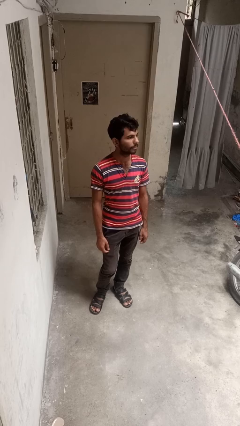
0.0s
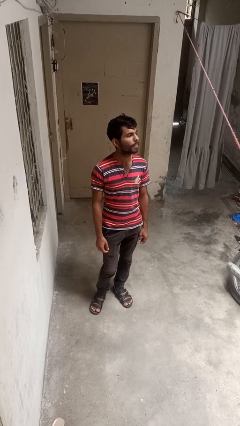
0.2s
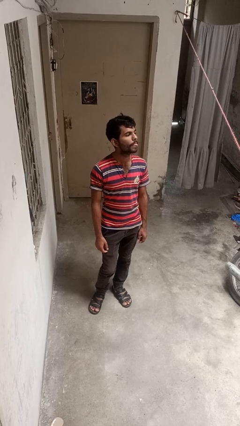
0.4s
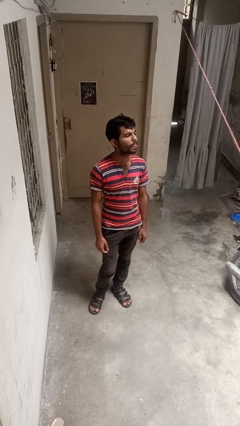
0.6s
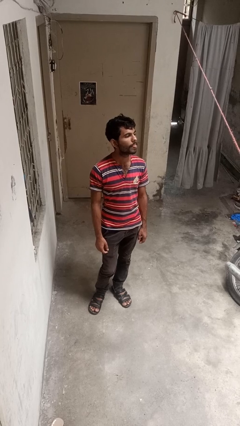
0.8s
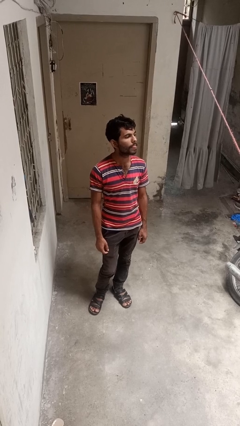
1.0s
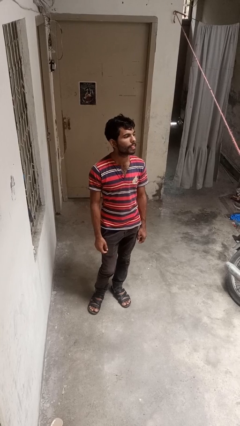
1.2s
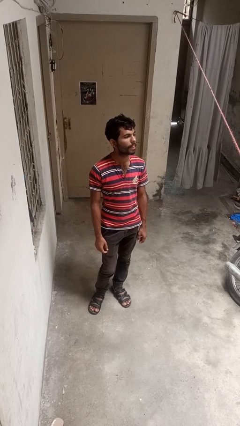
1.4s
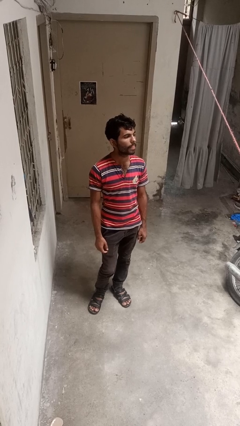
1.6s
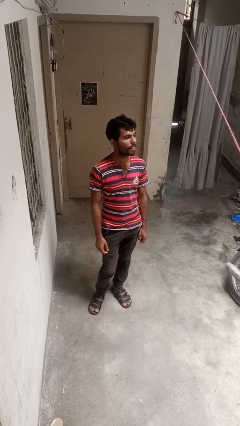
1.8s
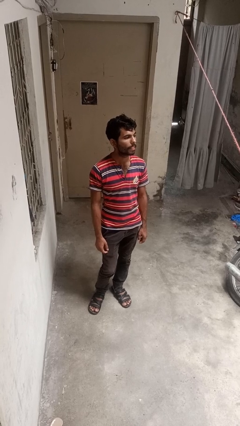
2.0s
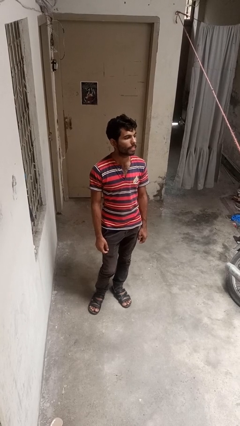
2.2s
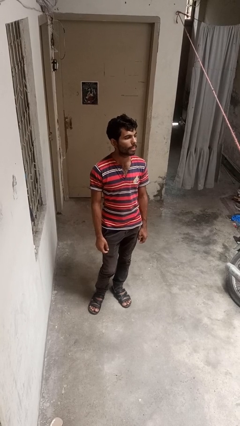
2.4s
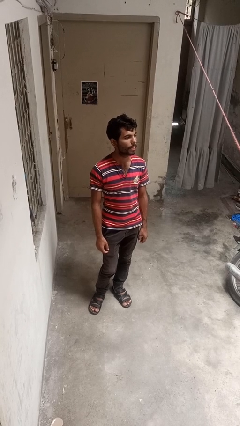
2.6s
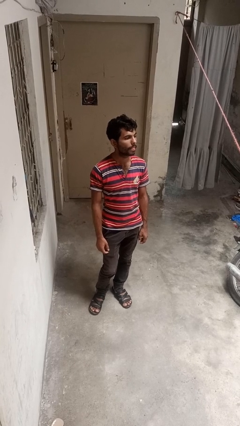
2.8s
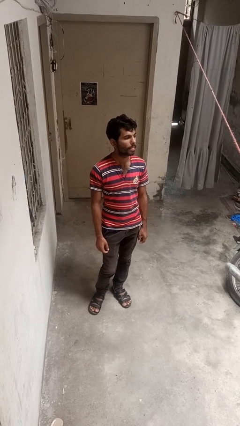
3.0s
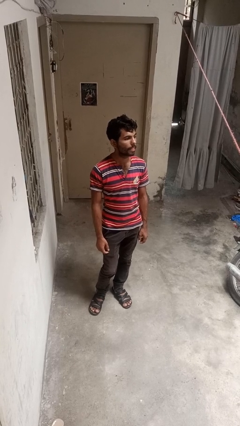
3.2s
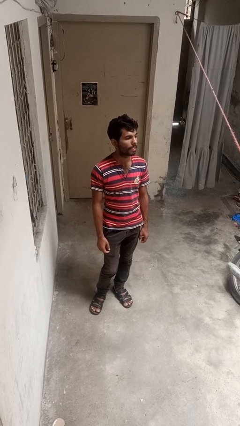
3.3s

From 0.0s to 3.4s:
person sticks out tongue

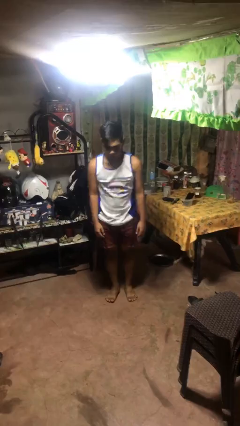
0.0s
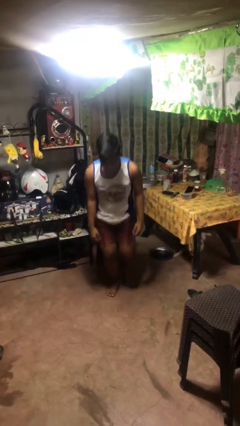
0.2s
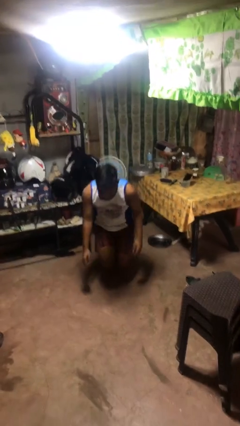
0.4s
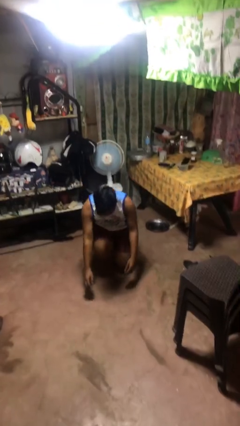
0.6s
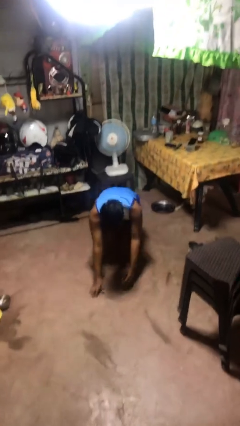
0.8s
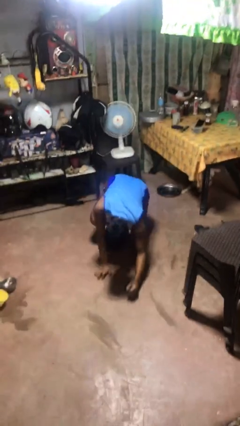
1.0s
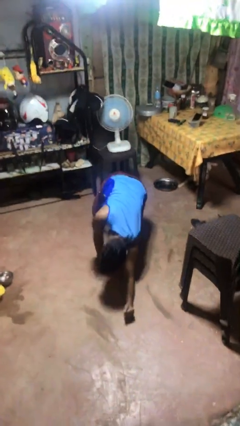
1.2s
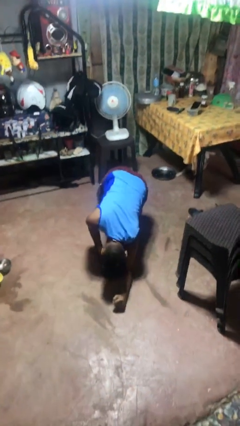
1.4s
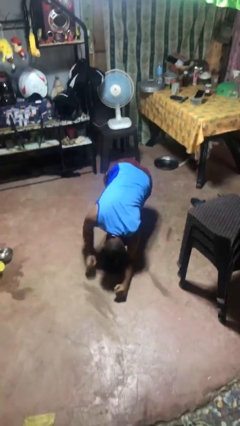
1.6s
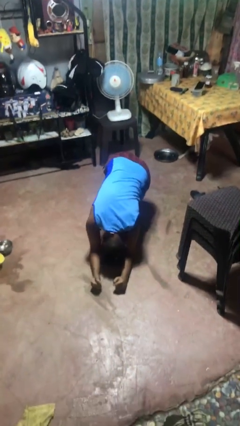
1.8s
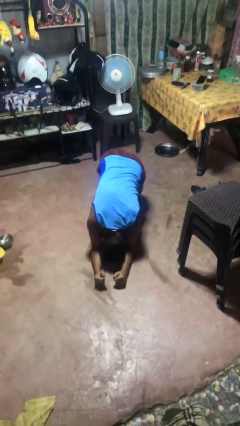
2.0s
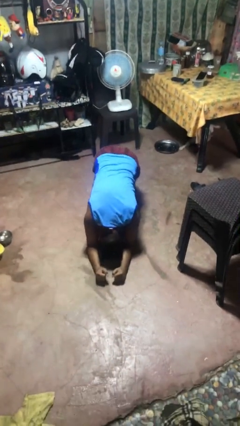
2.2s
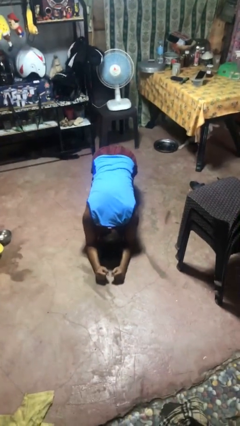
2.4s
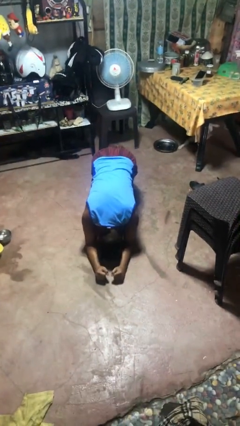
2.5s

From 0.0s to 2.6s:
person exercises with plank

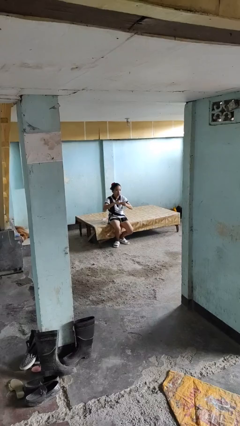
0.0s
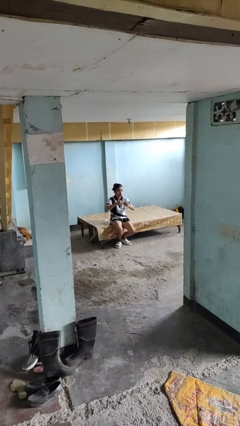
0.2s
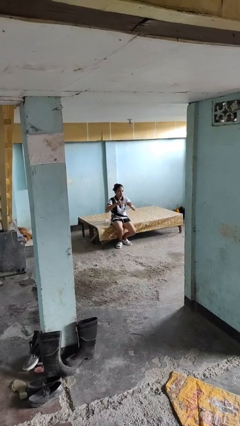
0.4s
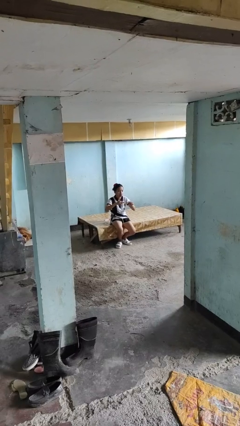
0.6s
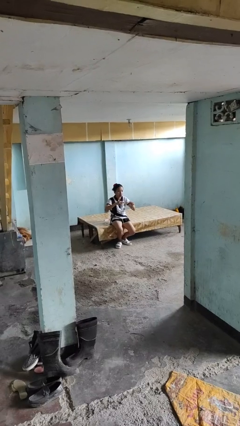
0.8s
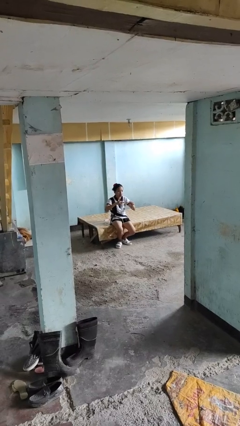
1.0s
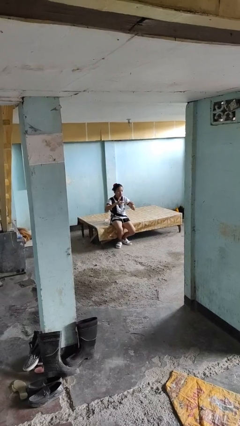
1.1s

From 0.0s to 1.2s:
person takes off ring

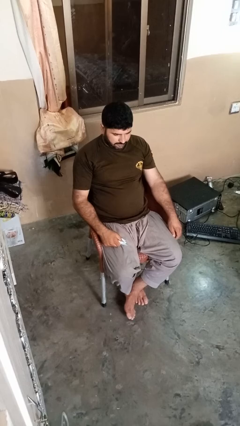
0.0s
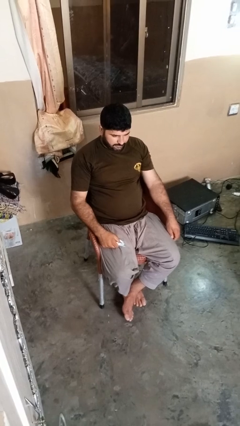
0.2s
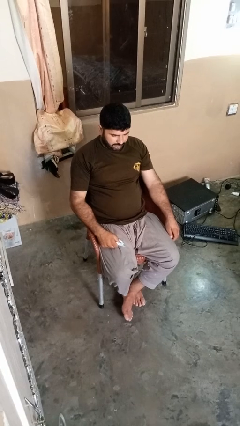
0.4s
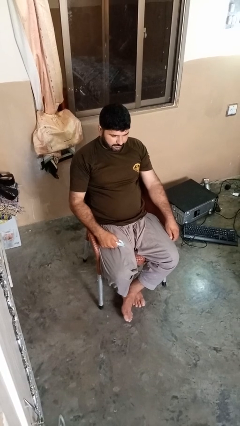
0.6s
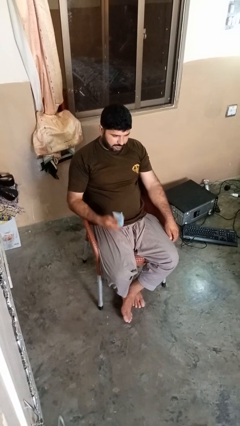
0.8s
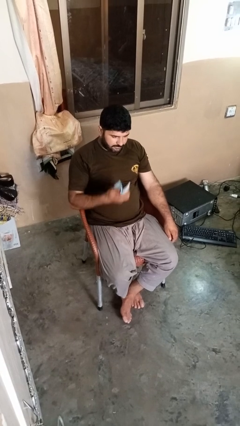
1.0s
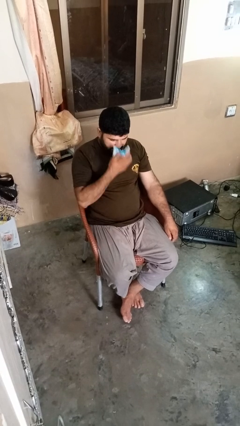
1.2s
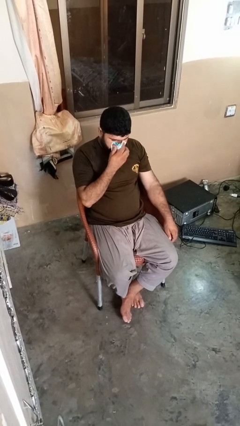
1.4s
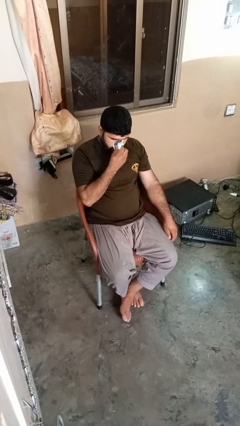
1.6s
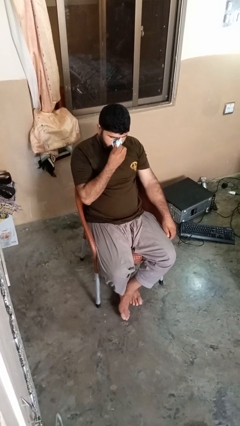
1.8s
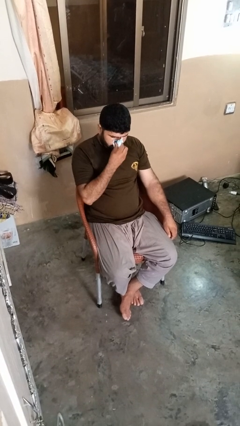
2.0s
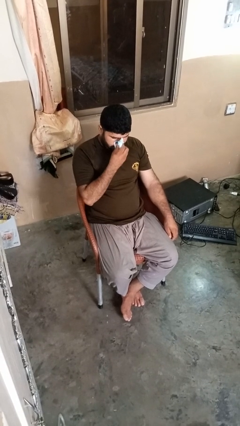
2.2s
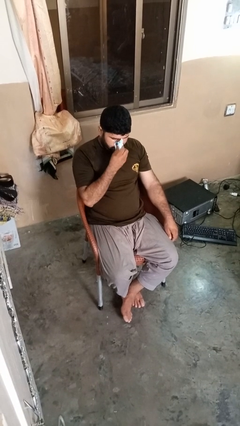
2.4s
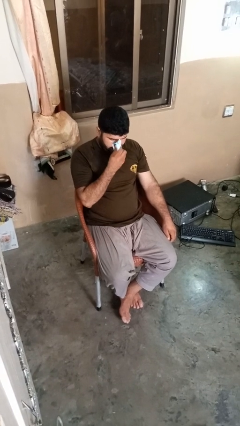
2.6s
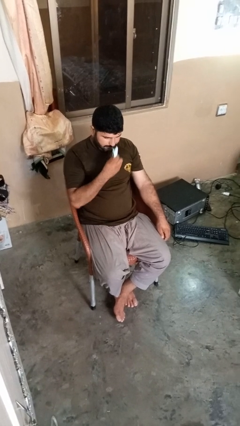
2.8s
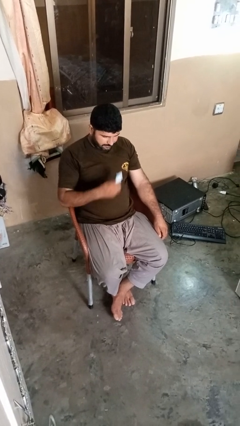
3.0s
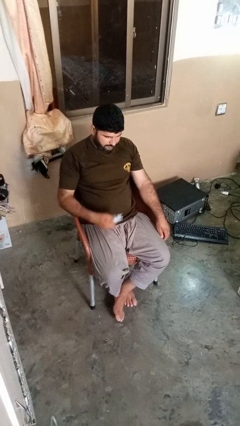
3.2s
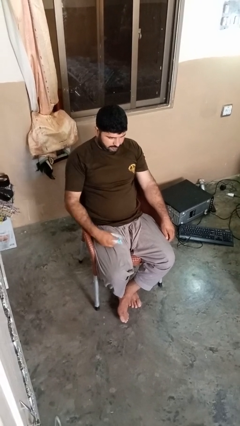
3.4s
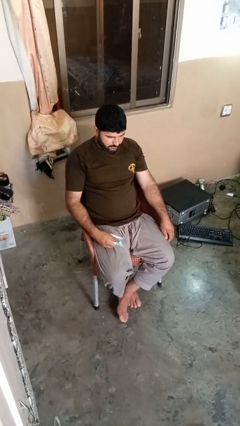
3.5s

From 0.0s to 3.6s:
person blows nose

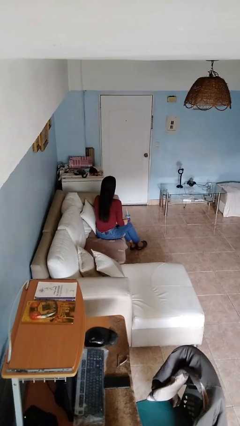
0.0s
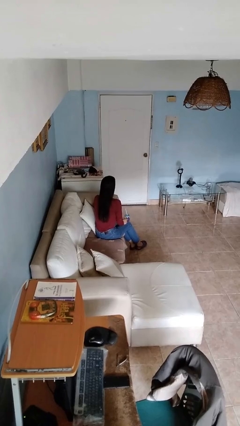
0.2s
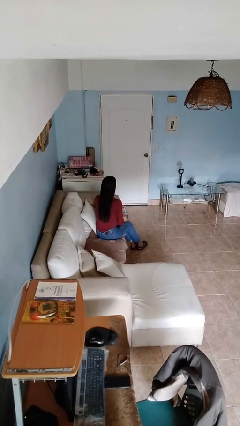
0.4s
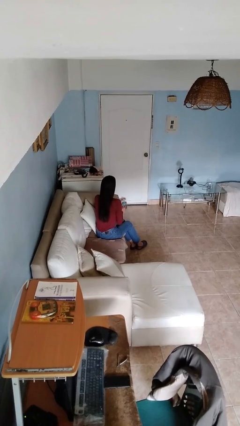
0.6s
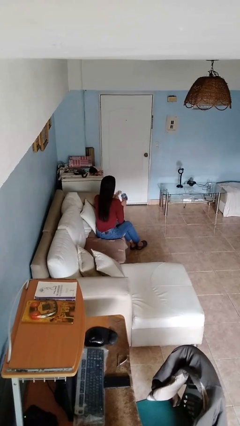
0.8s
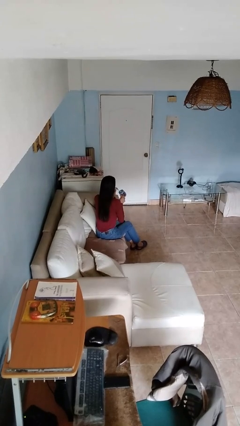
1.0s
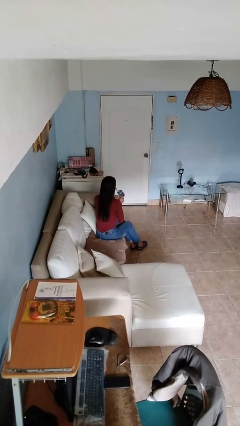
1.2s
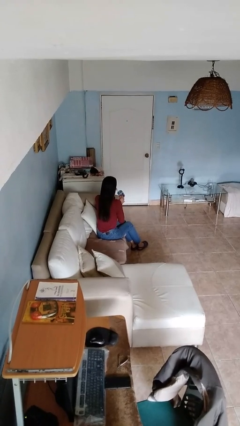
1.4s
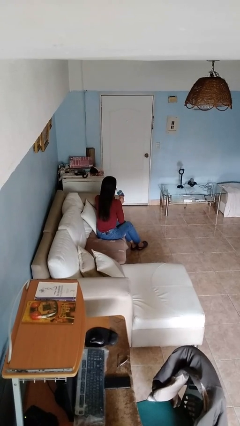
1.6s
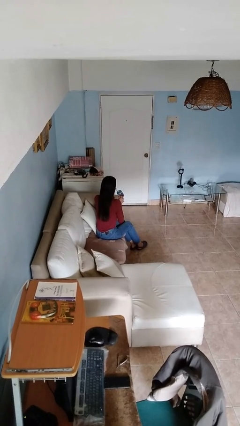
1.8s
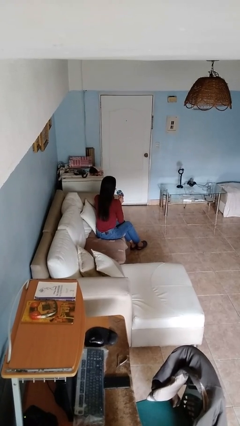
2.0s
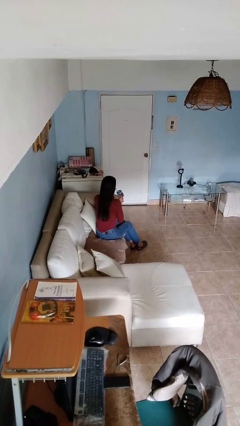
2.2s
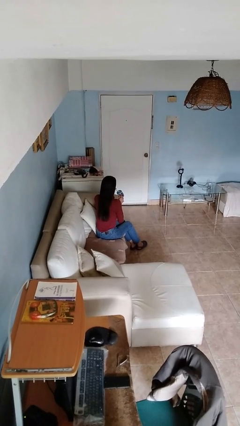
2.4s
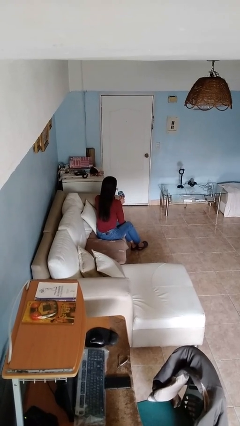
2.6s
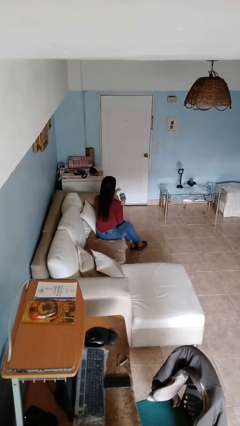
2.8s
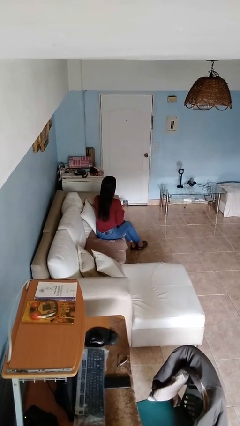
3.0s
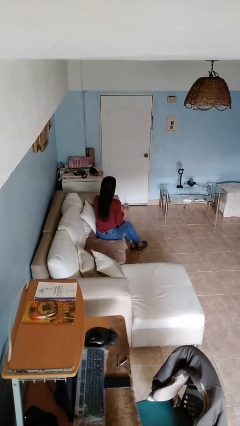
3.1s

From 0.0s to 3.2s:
person drinks from straw

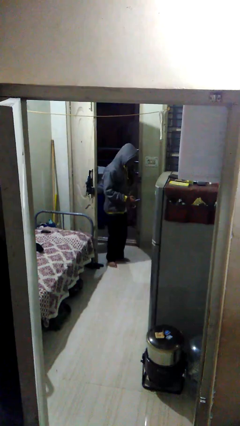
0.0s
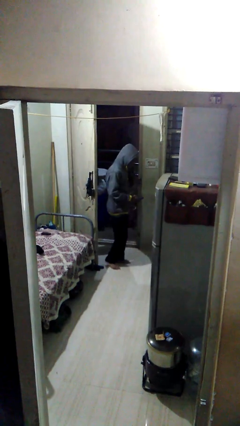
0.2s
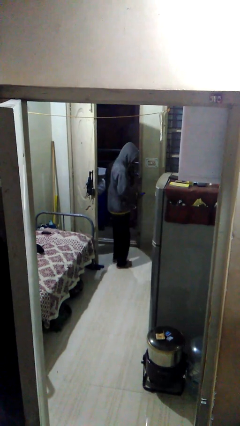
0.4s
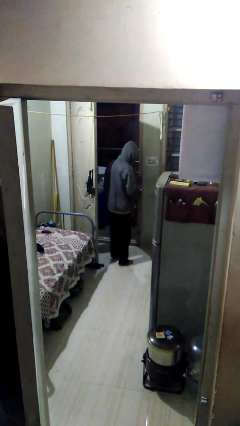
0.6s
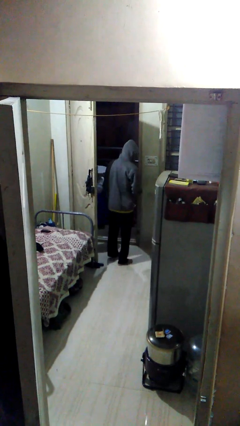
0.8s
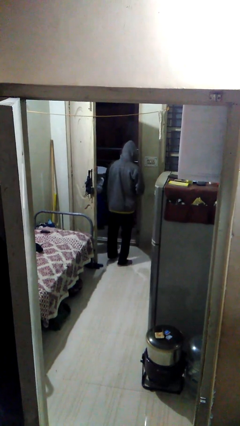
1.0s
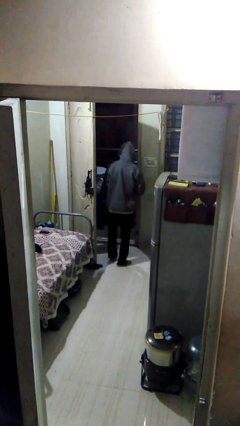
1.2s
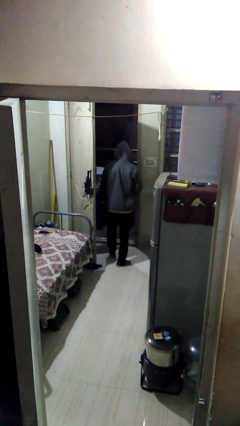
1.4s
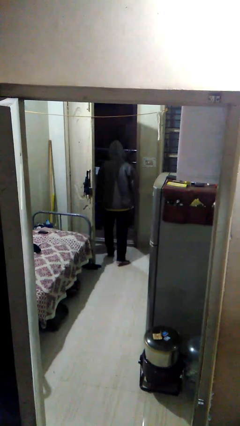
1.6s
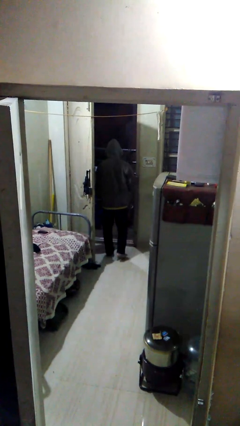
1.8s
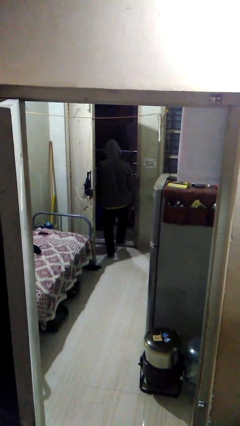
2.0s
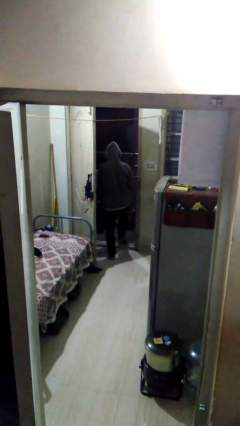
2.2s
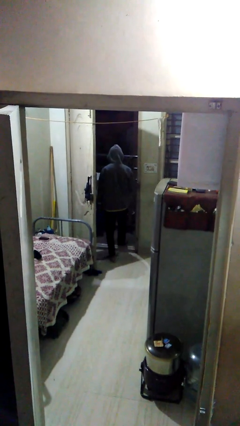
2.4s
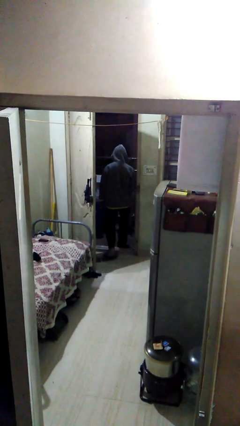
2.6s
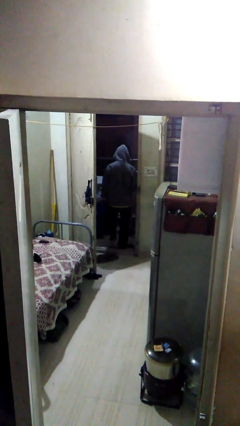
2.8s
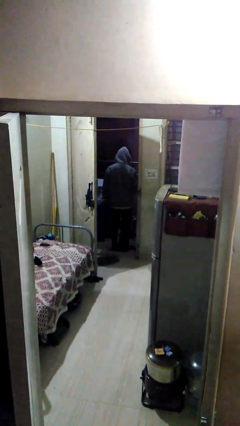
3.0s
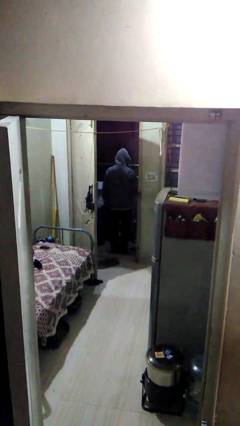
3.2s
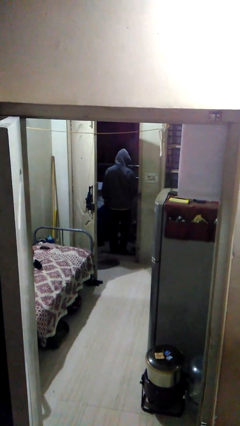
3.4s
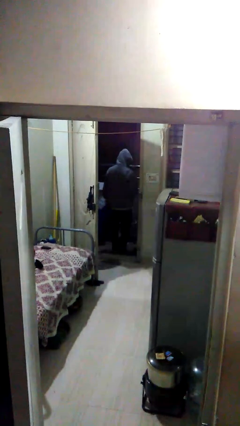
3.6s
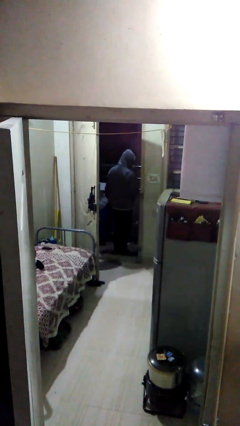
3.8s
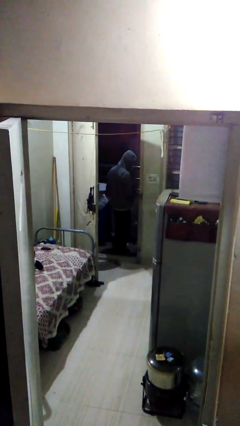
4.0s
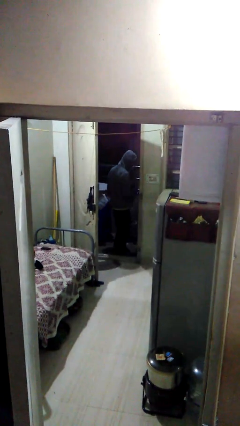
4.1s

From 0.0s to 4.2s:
person exits scene through structure
